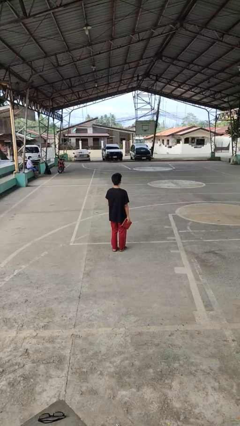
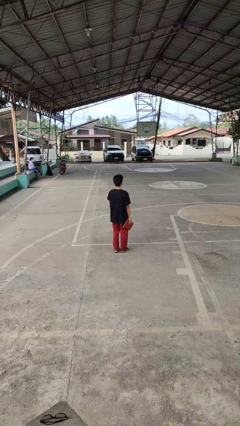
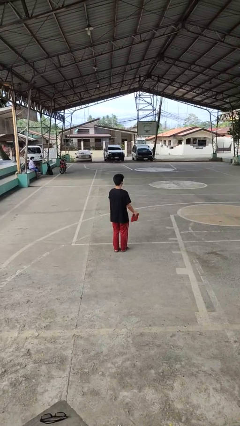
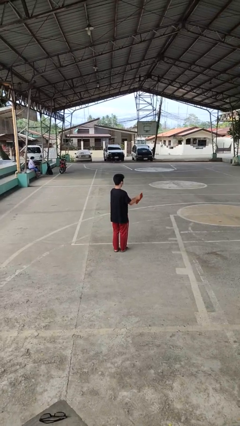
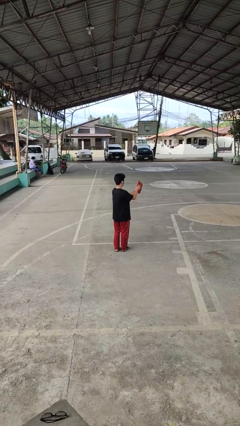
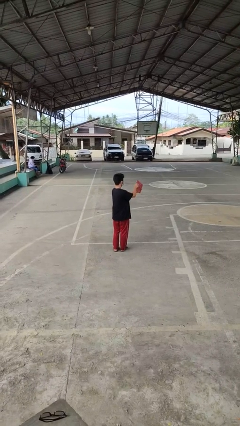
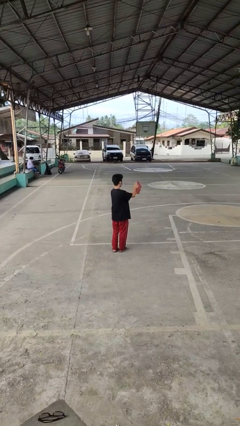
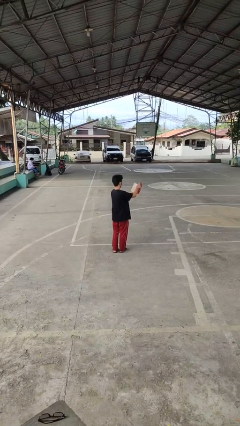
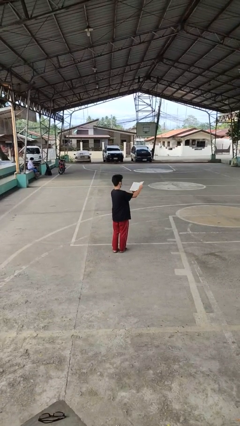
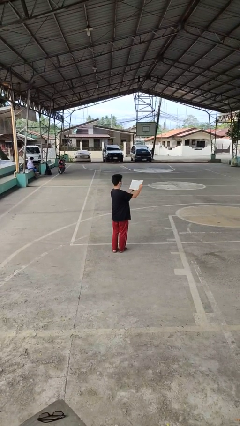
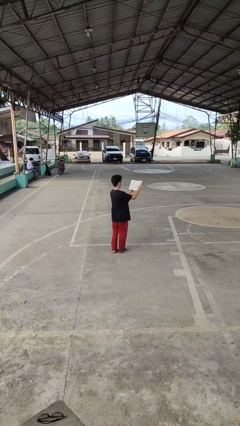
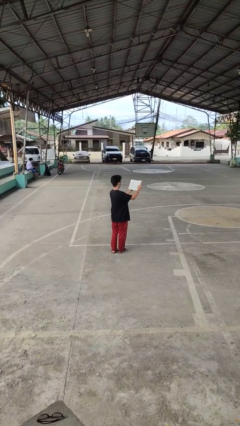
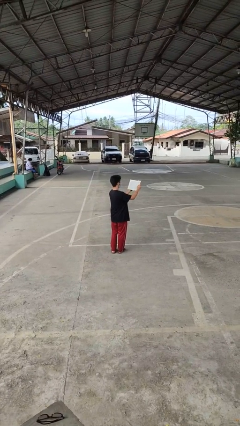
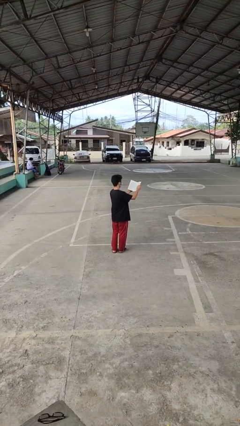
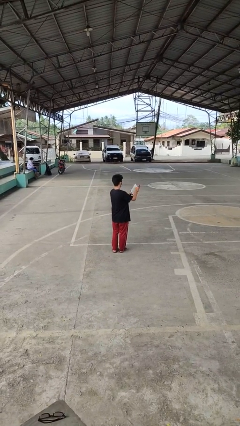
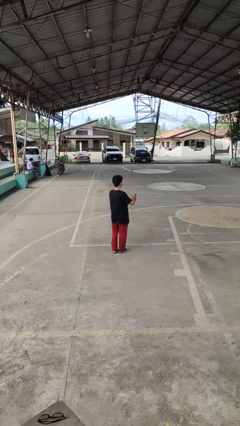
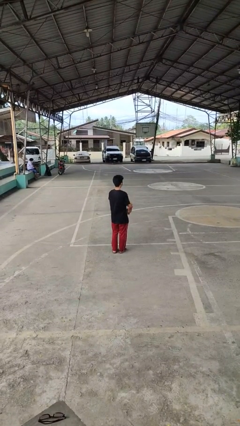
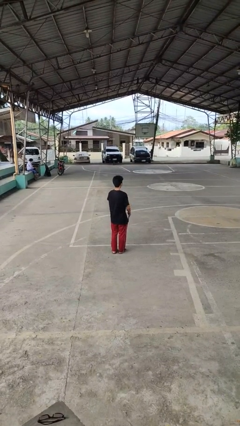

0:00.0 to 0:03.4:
person reads book

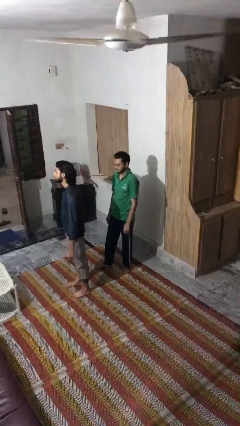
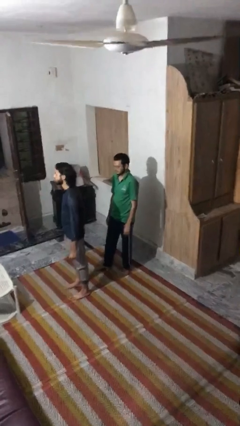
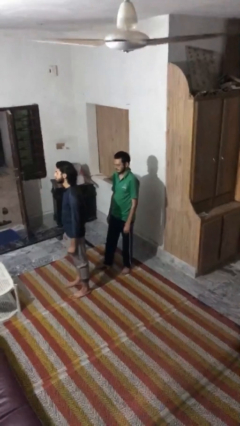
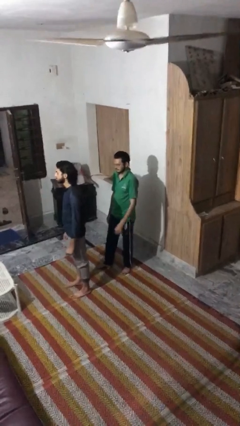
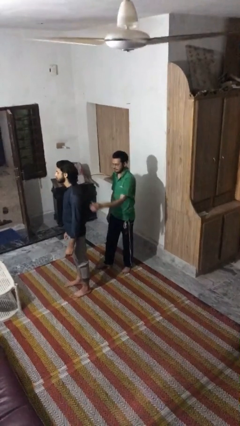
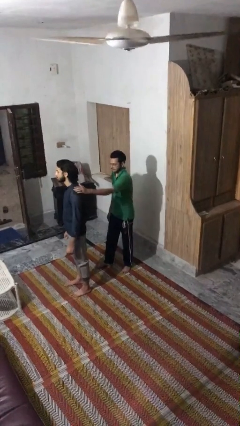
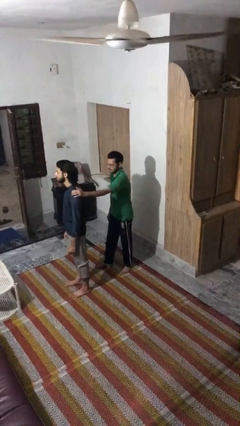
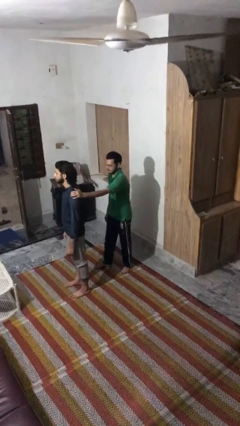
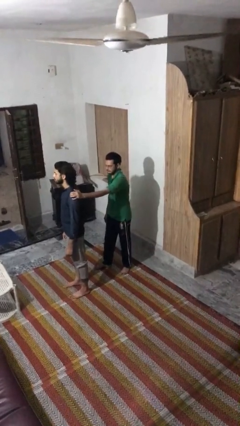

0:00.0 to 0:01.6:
person grabs person by shoulder

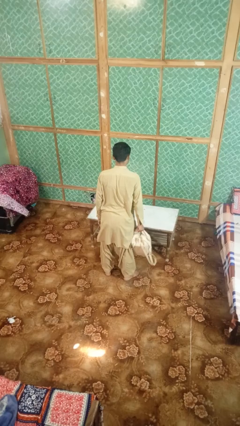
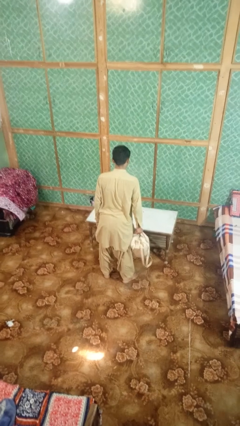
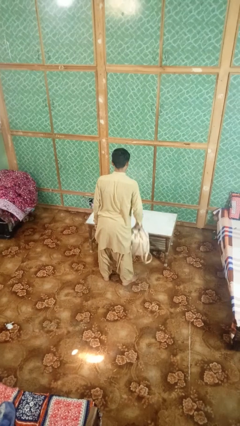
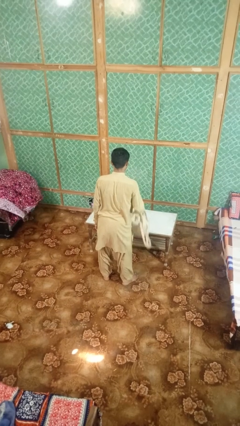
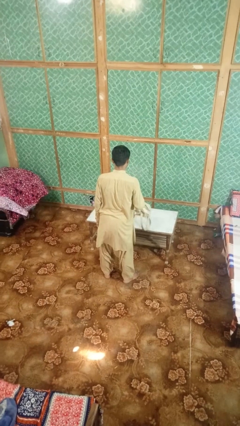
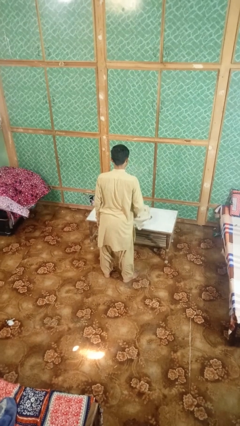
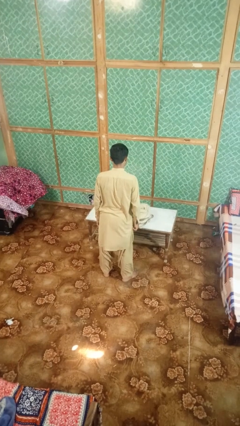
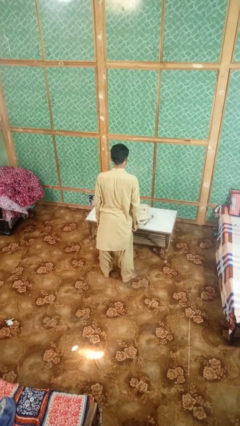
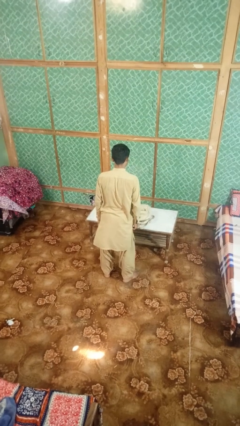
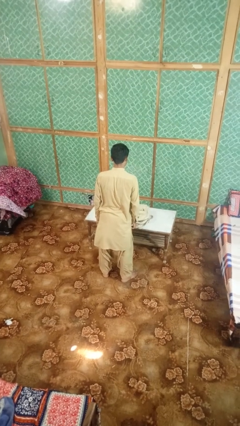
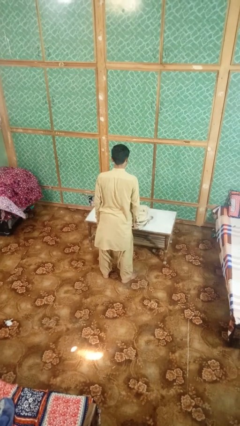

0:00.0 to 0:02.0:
person throws object on table

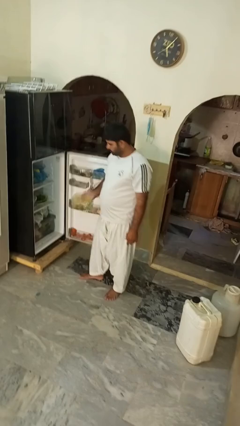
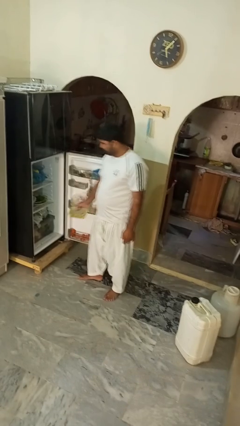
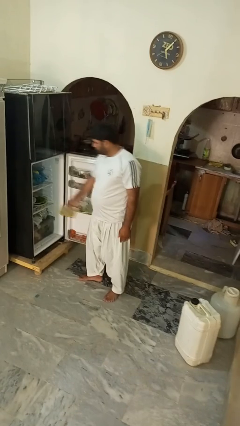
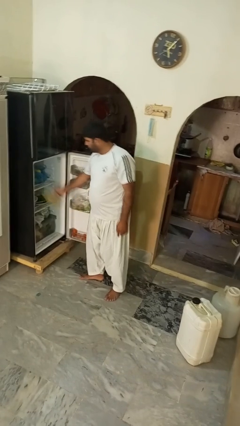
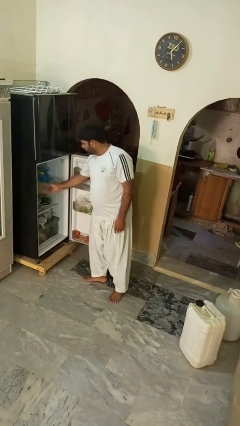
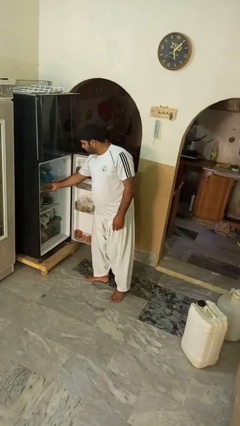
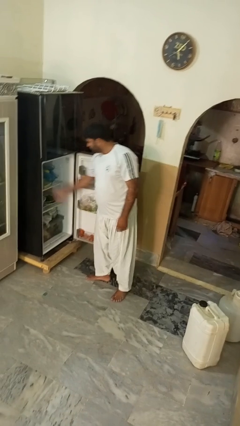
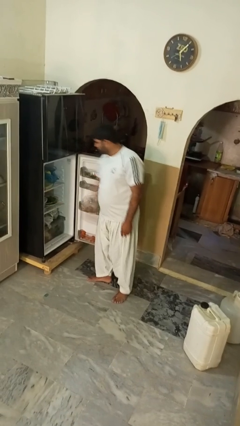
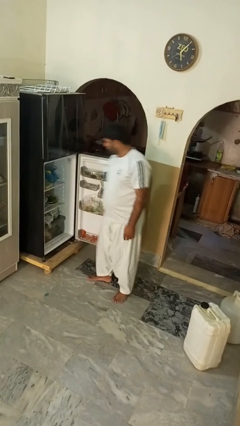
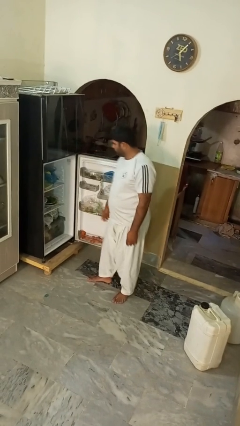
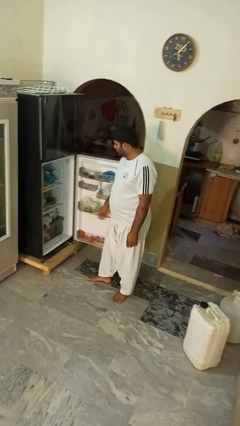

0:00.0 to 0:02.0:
person puts object into refrigerator

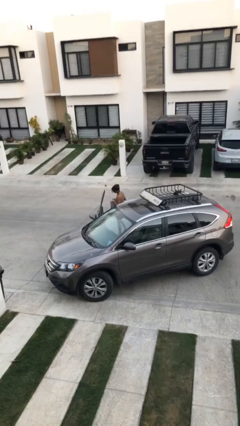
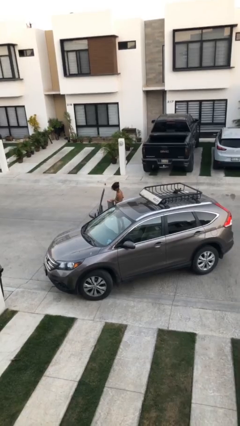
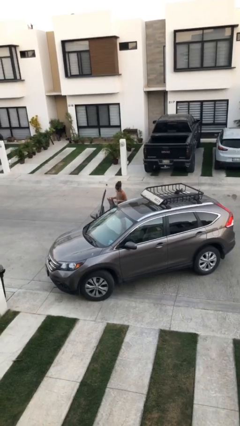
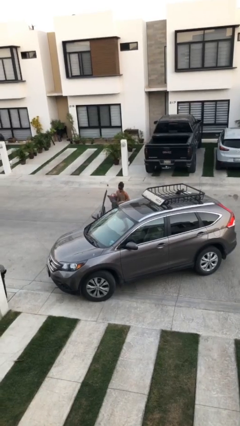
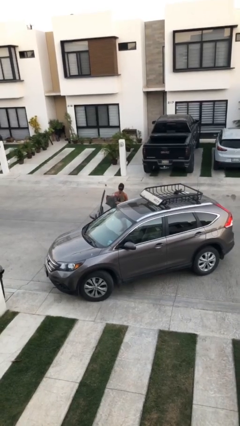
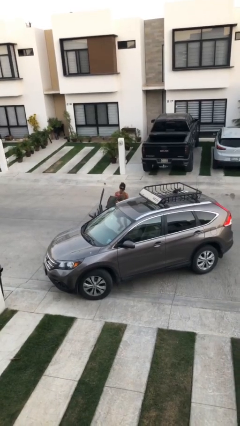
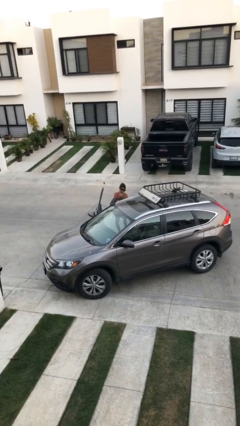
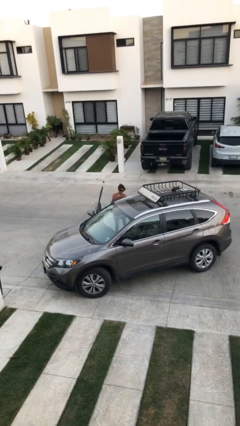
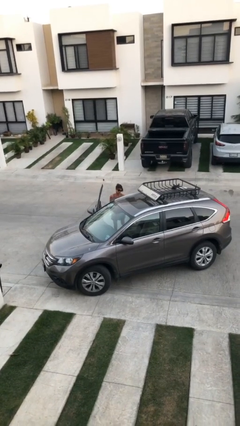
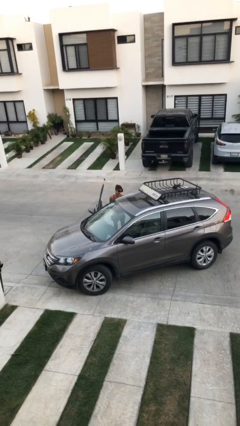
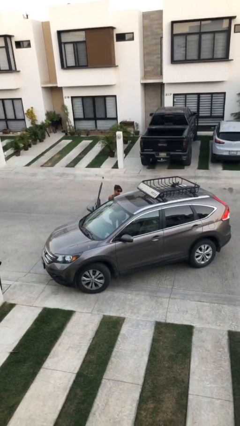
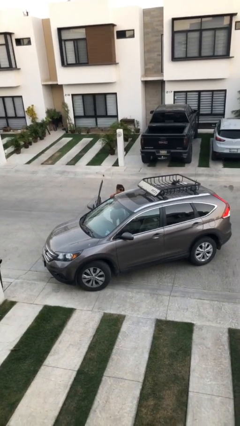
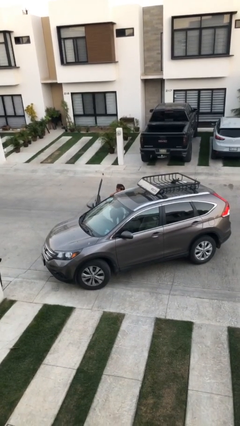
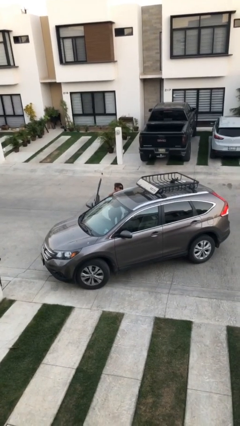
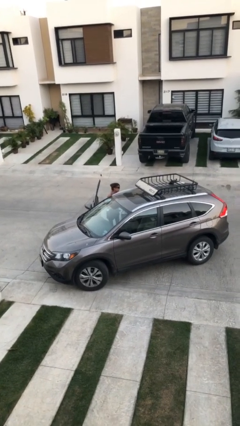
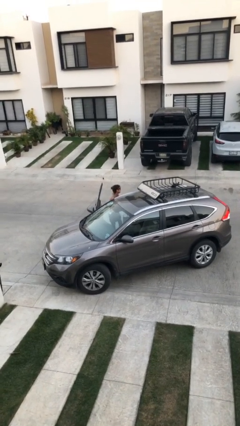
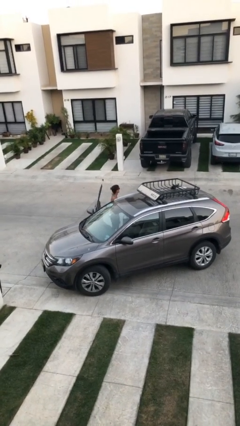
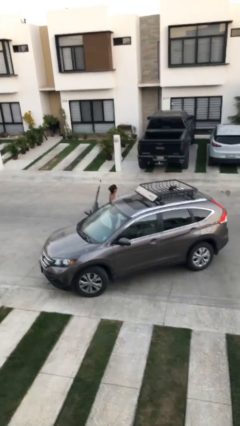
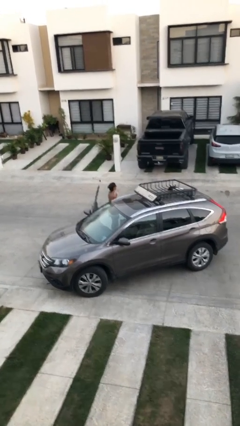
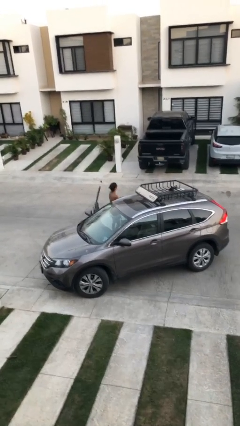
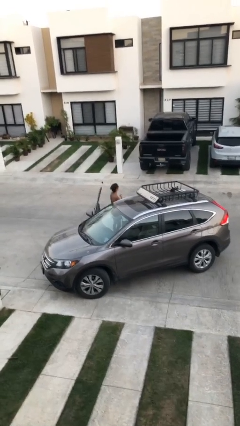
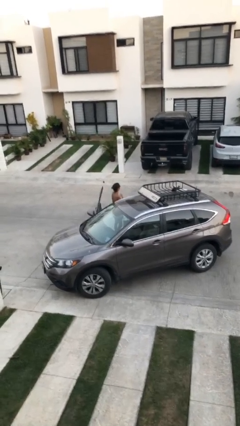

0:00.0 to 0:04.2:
person loads car

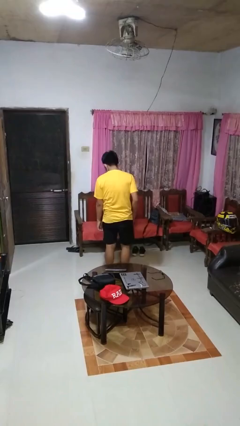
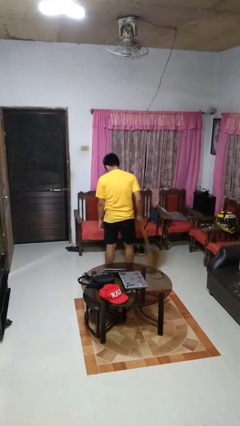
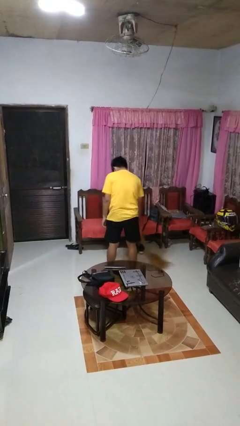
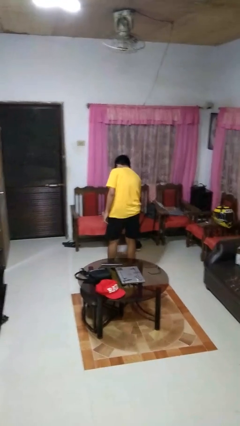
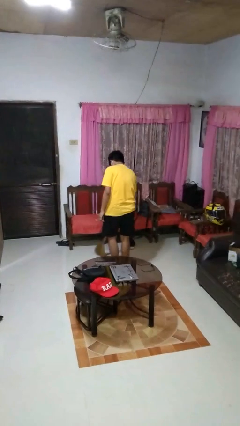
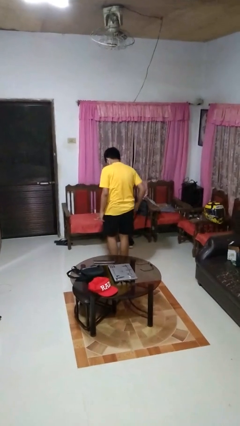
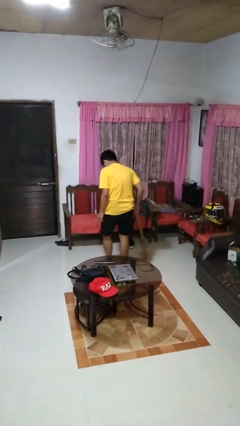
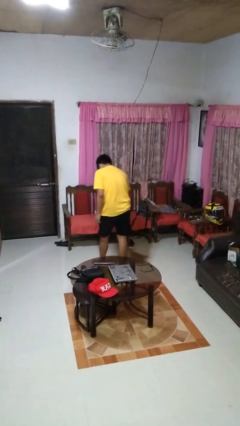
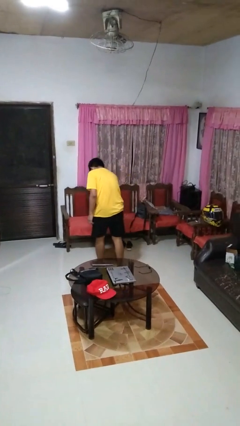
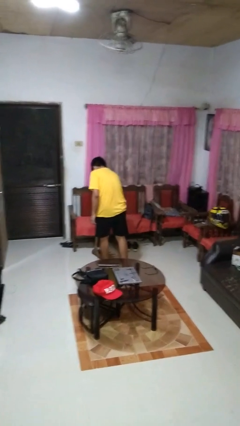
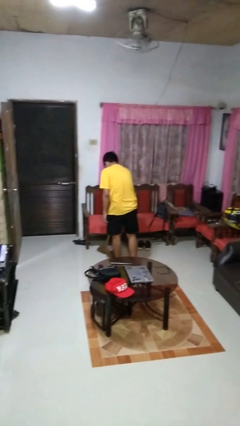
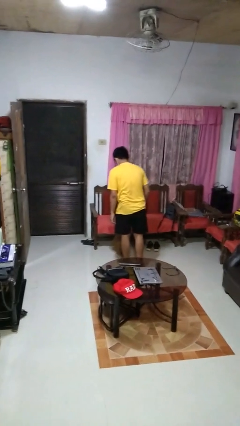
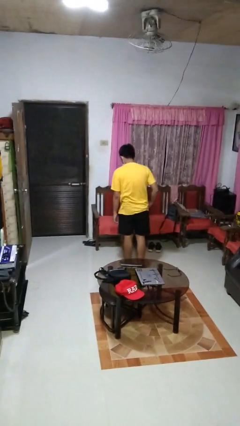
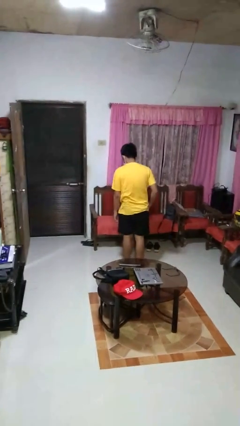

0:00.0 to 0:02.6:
person sweeps floor

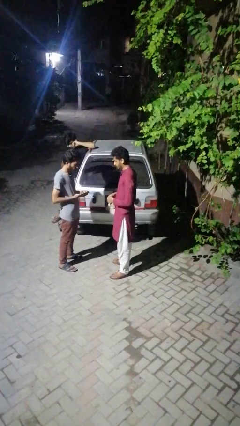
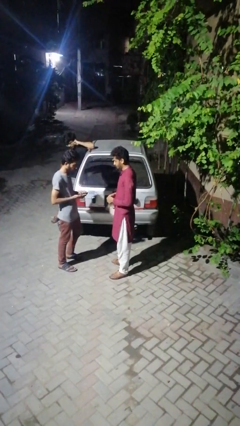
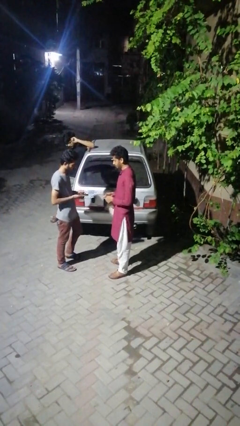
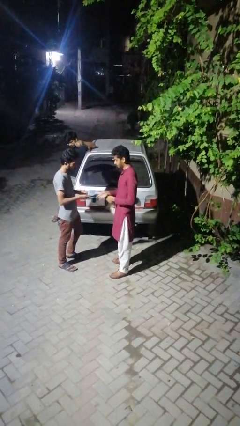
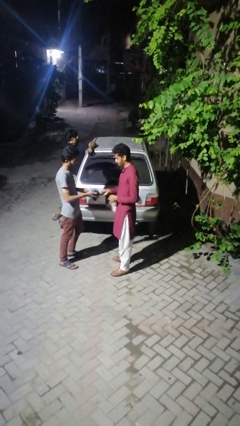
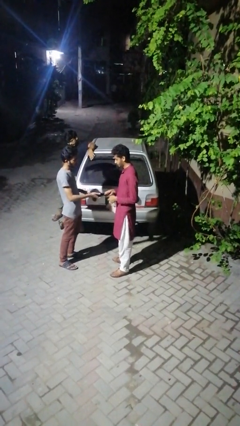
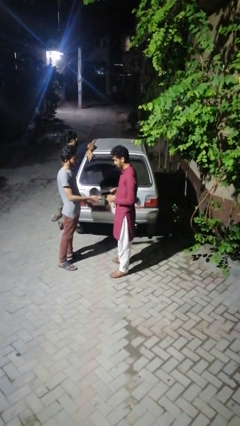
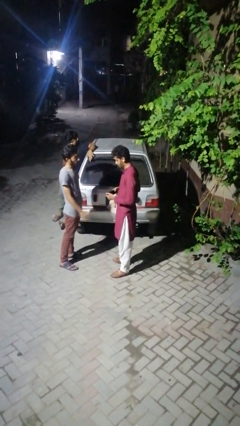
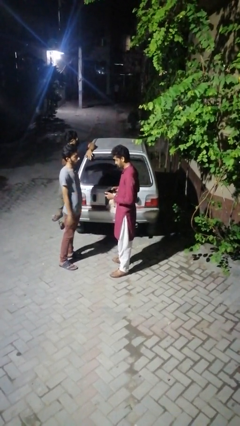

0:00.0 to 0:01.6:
person transfers object to person
